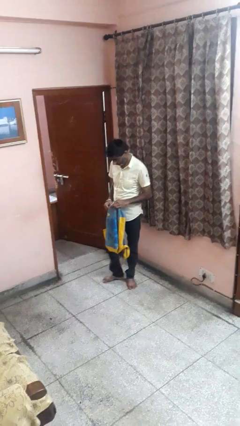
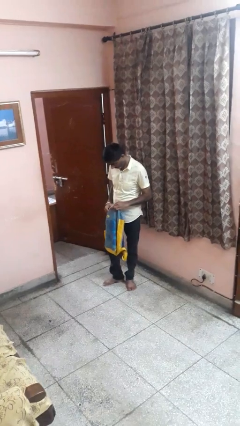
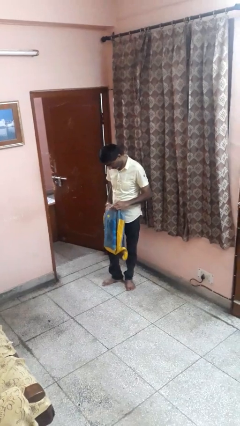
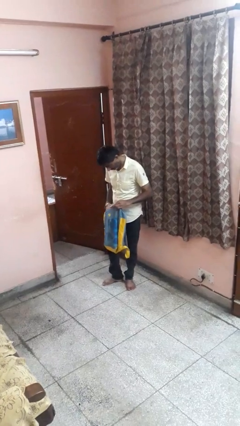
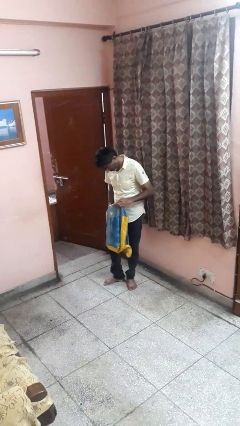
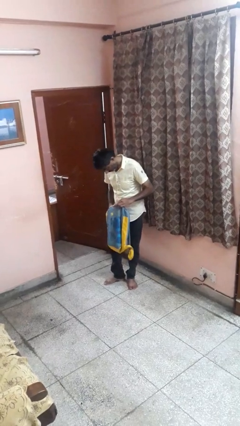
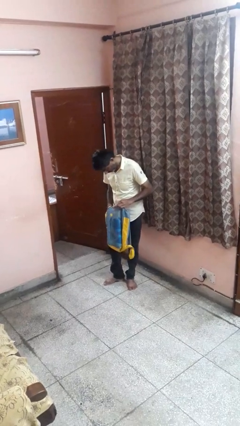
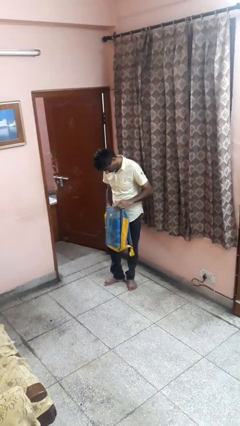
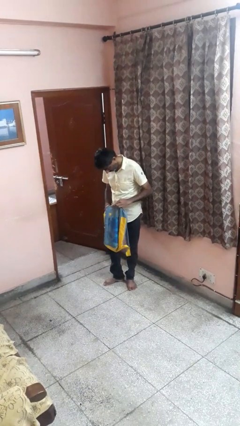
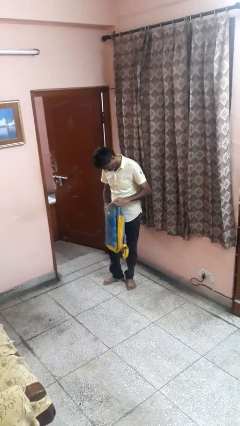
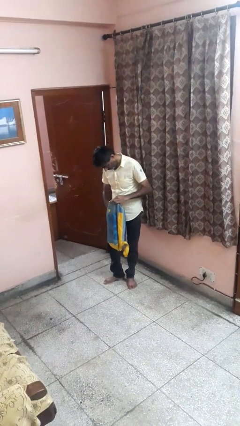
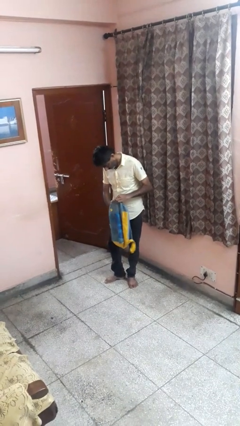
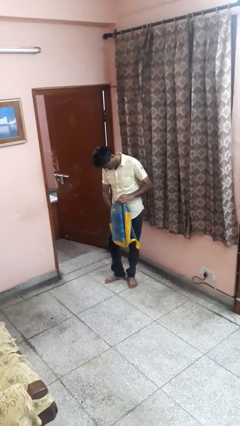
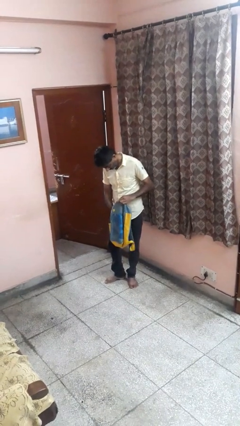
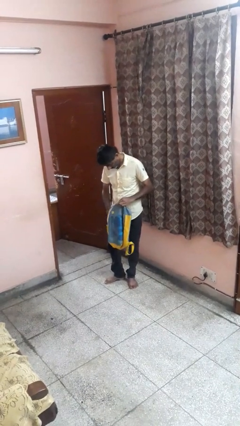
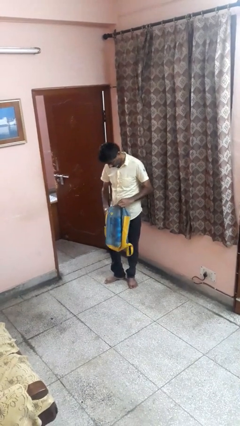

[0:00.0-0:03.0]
person searches in backpack

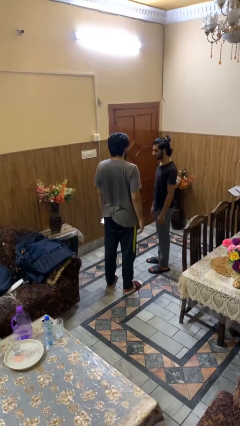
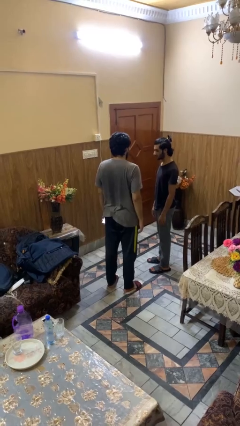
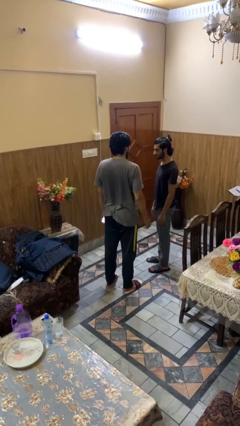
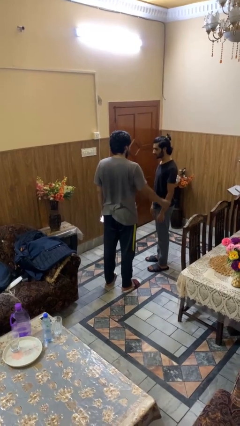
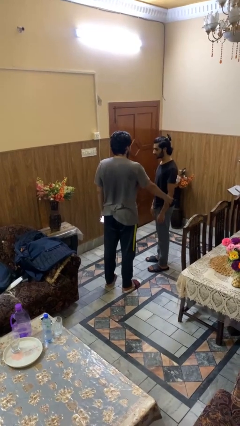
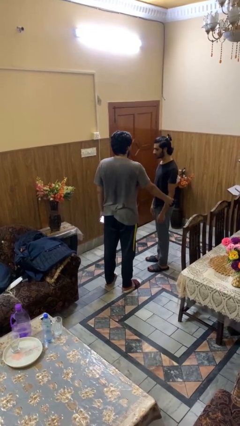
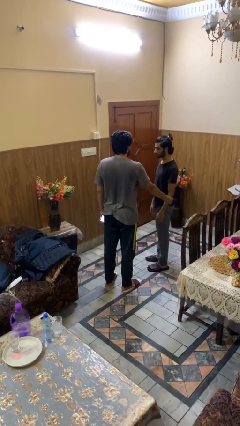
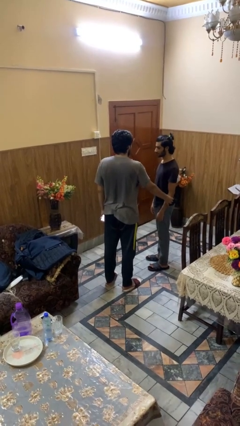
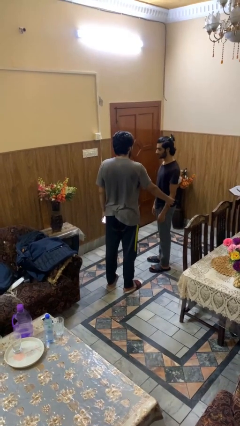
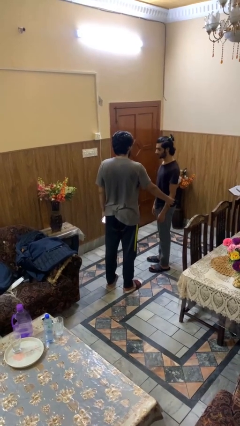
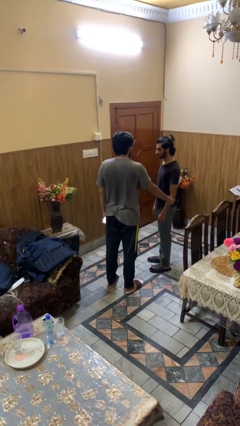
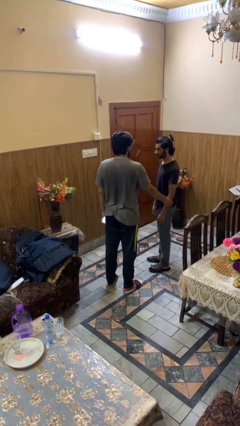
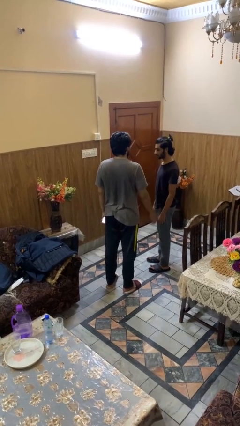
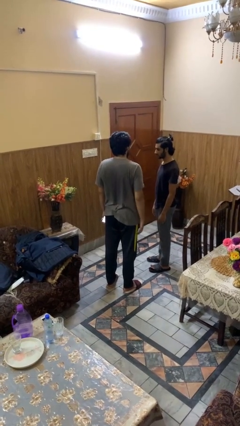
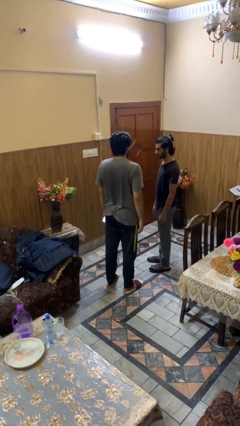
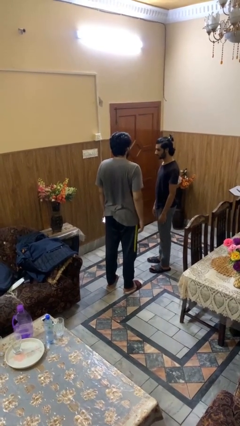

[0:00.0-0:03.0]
person grabs person by forearm

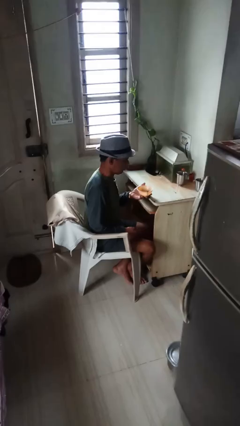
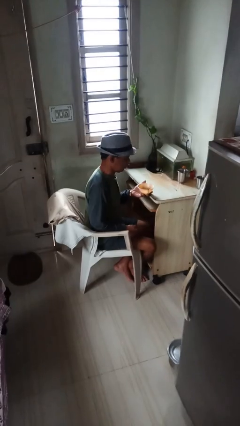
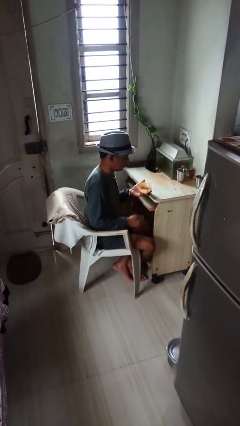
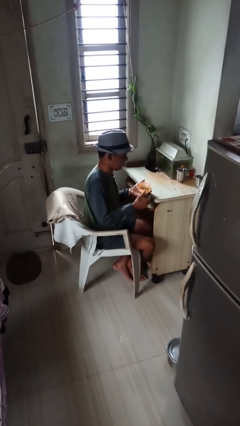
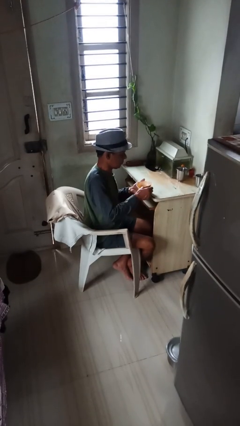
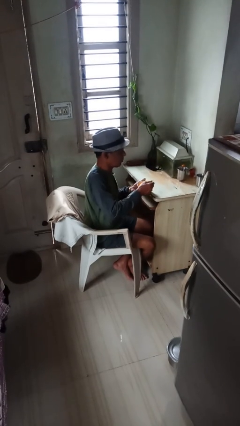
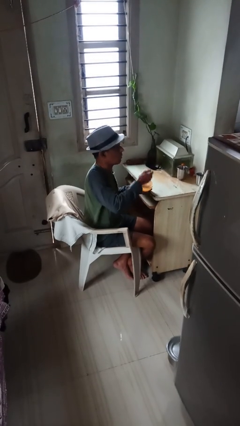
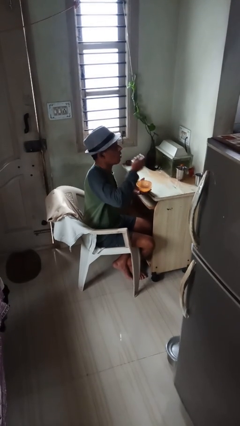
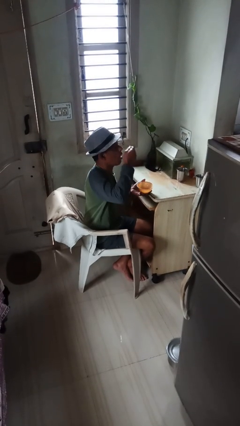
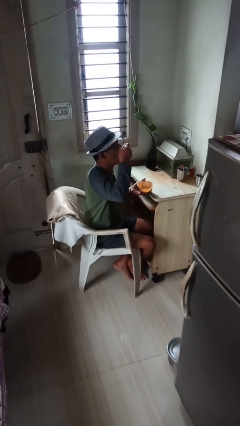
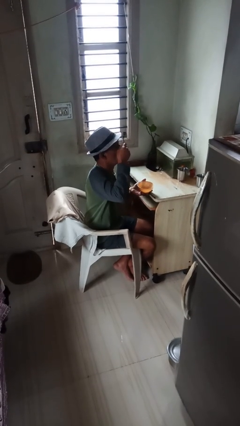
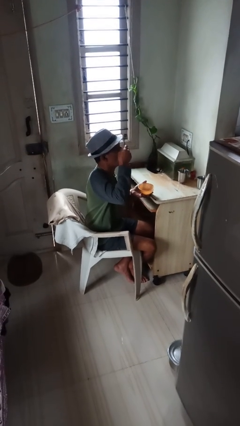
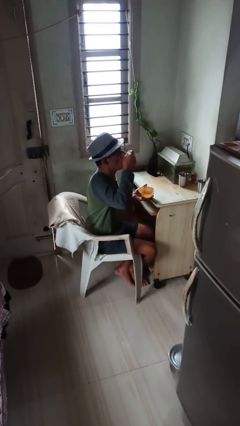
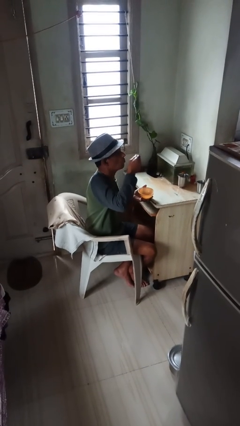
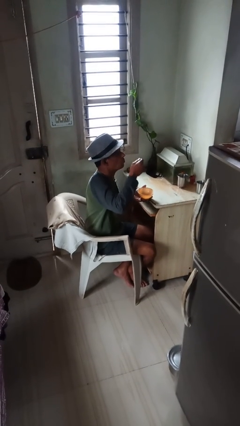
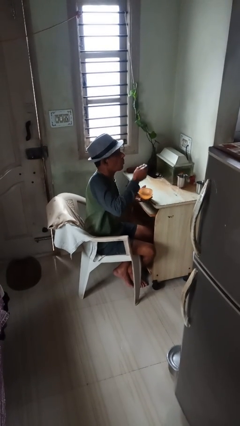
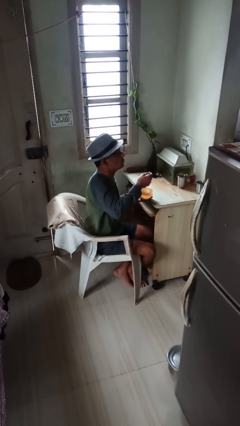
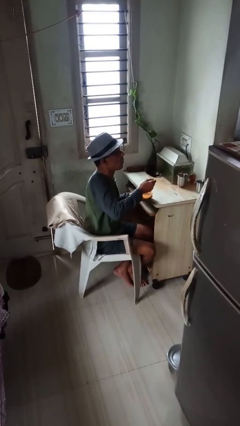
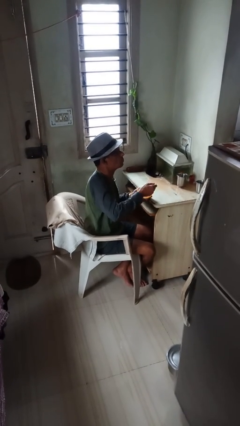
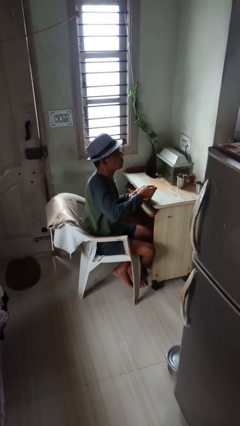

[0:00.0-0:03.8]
person eats with utensil

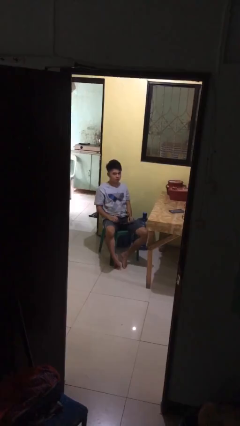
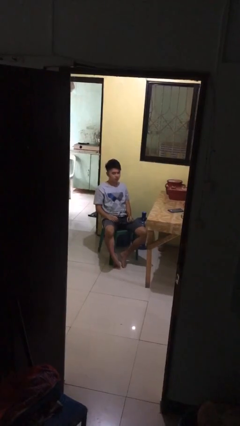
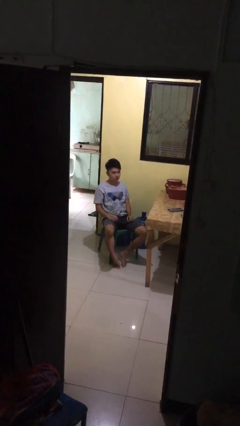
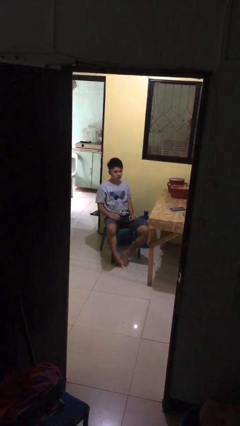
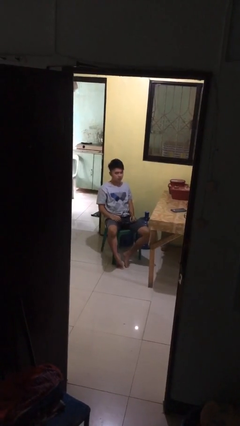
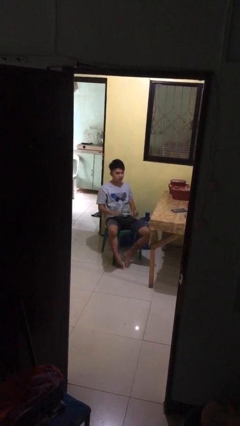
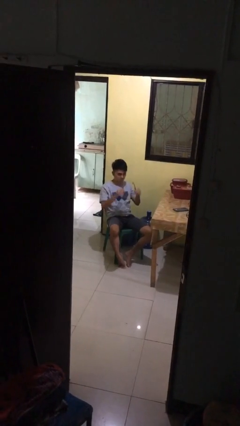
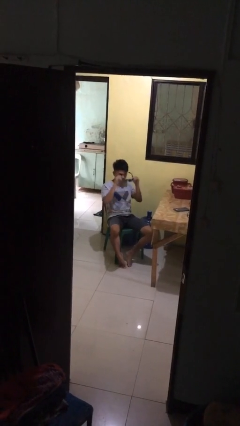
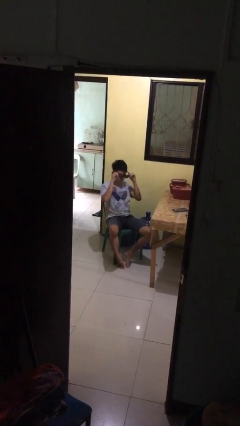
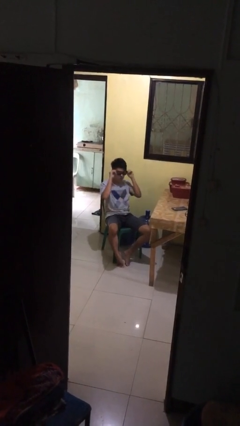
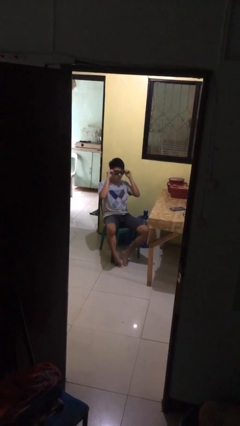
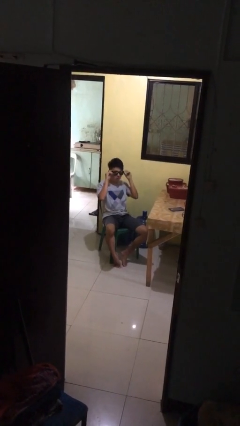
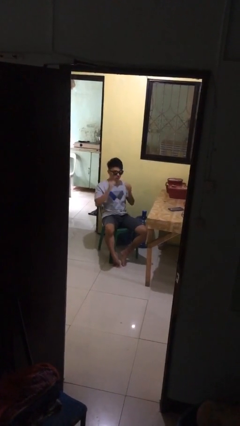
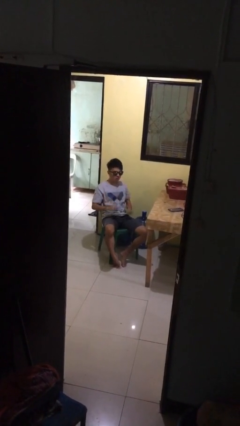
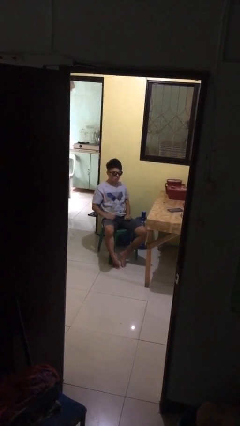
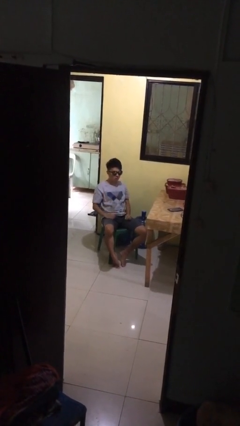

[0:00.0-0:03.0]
person puts on sunglasses

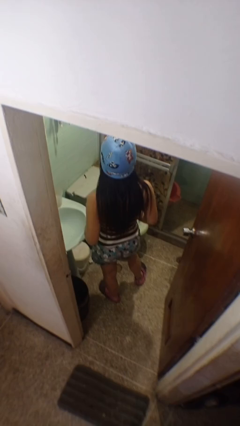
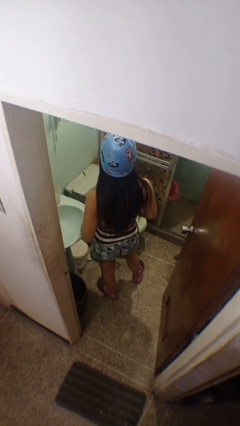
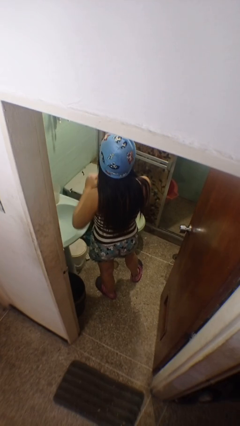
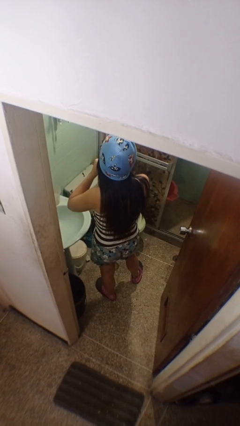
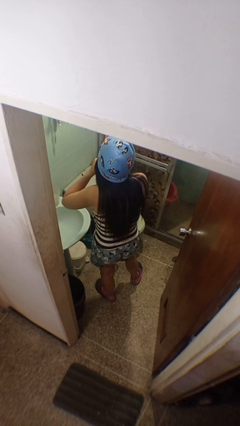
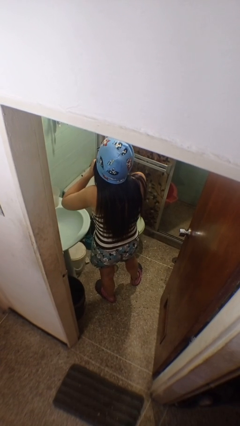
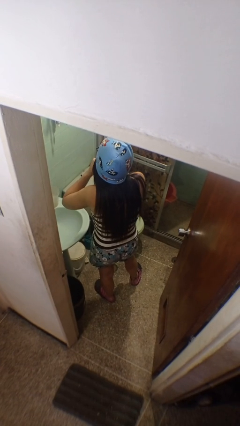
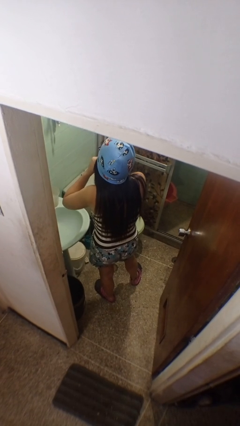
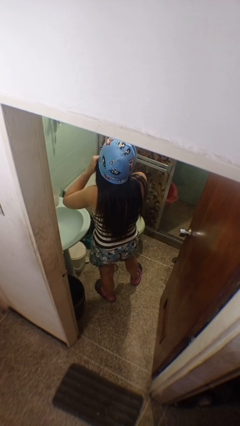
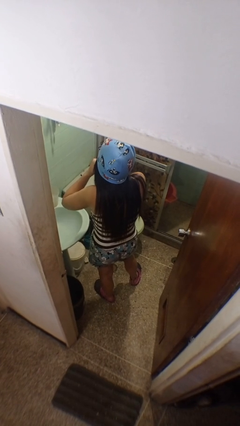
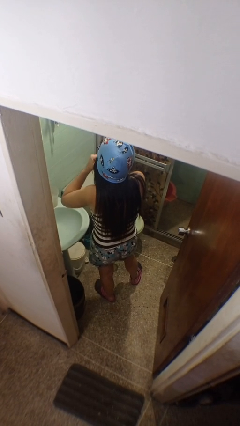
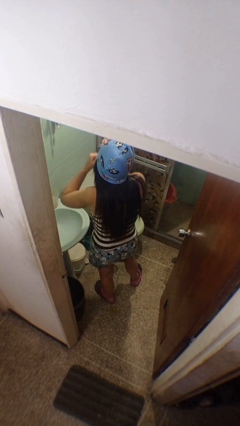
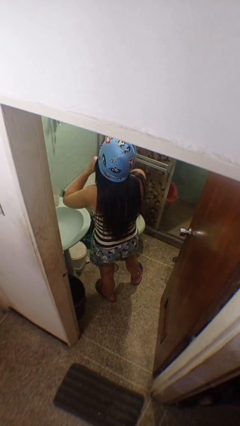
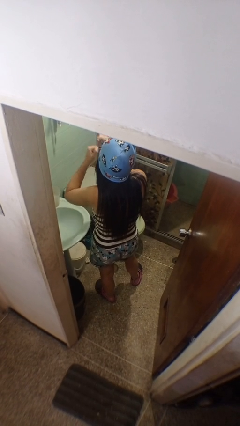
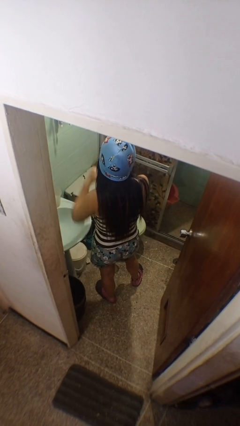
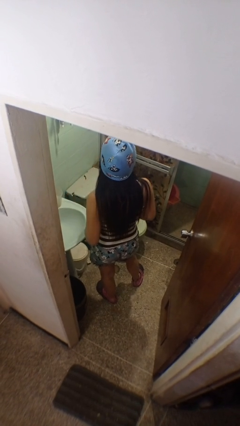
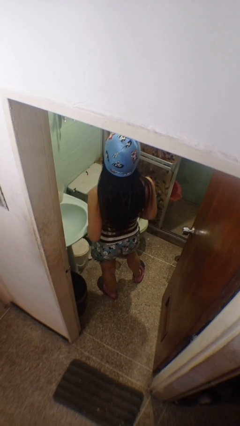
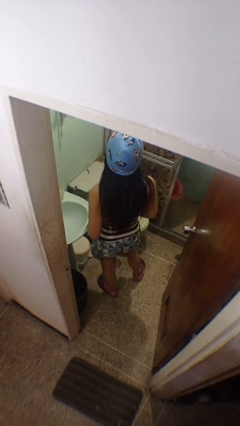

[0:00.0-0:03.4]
person flosses

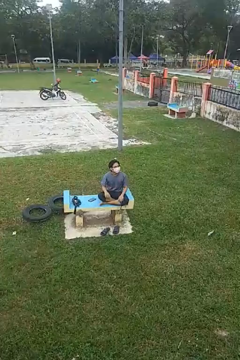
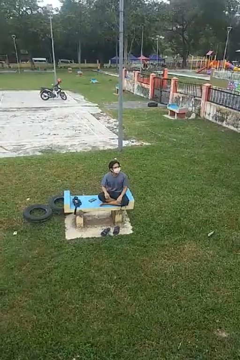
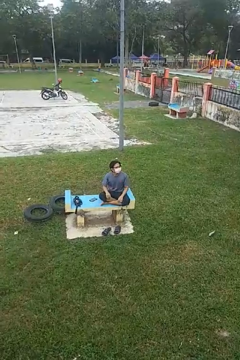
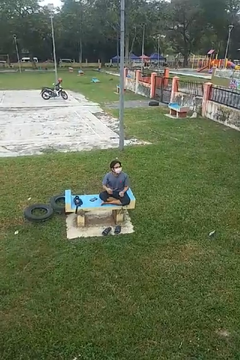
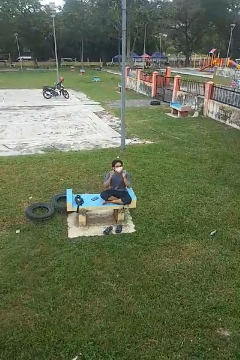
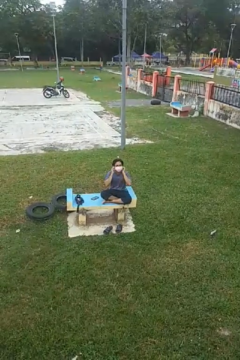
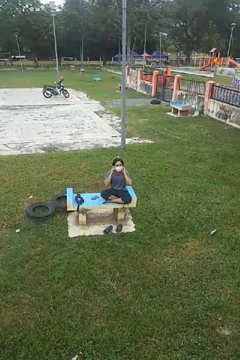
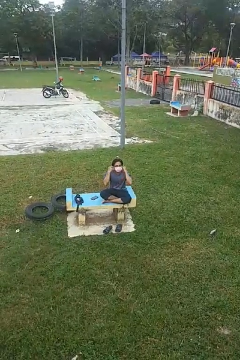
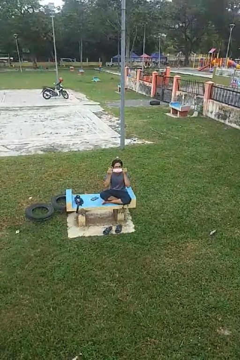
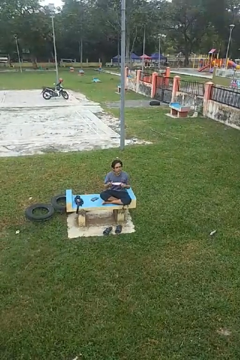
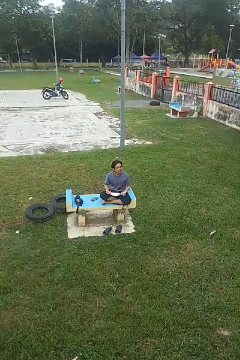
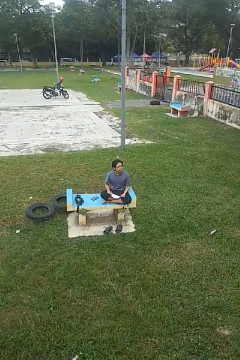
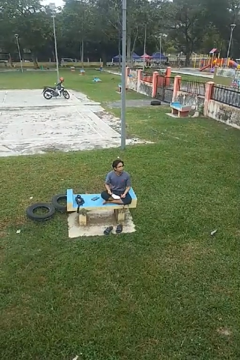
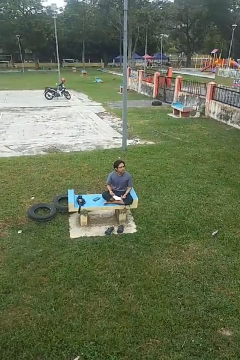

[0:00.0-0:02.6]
person takes off facemask
